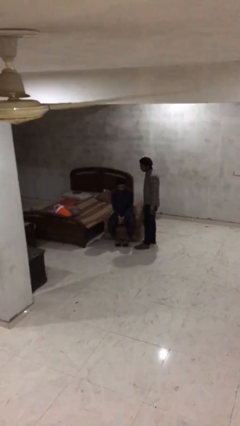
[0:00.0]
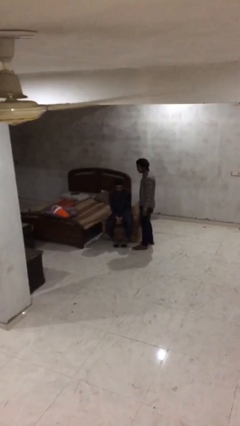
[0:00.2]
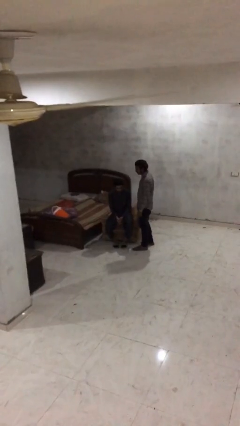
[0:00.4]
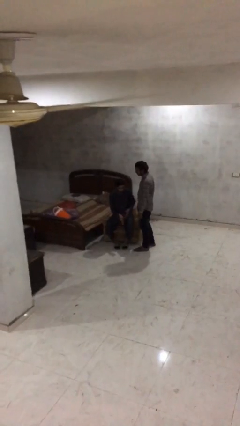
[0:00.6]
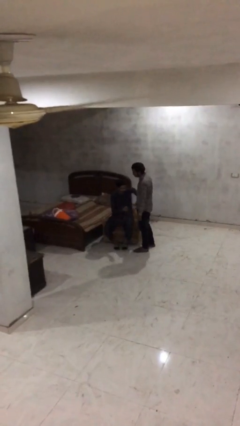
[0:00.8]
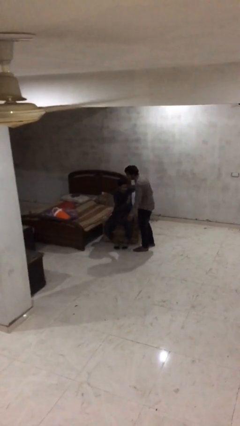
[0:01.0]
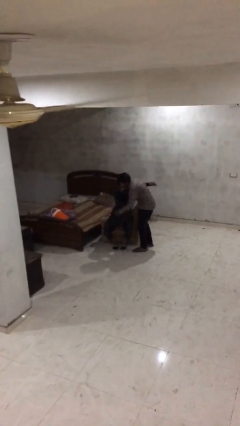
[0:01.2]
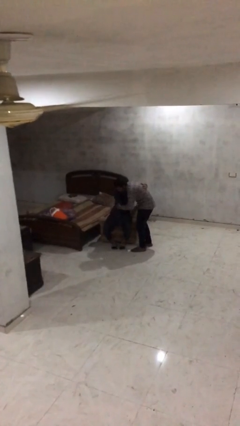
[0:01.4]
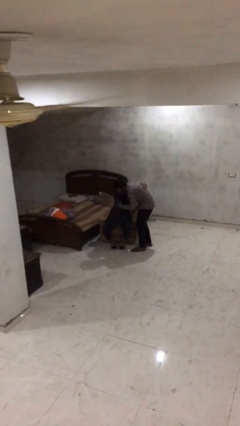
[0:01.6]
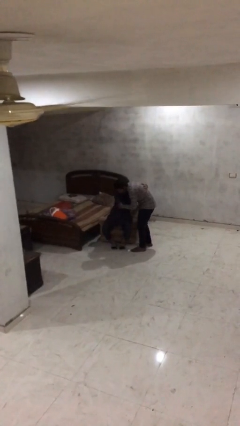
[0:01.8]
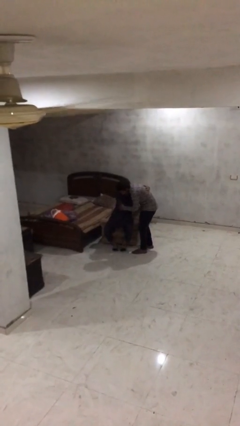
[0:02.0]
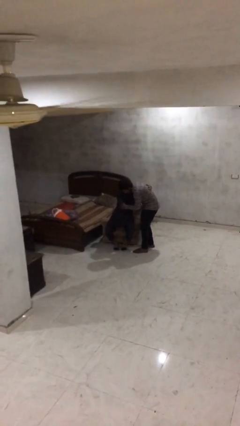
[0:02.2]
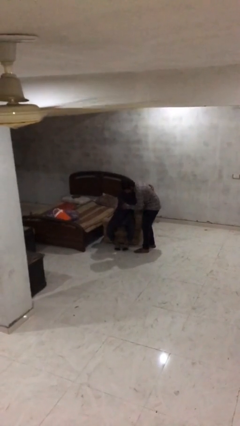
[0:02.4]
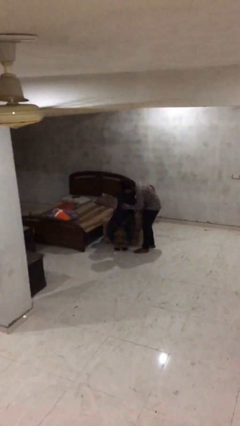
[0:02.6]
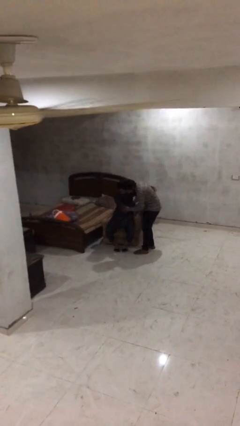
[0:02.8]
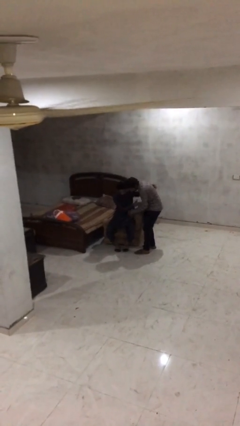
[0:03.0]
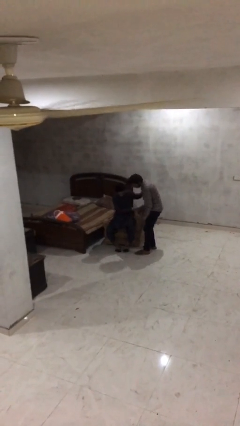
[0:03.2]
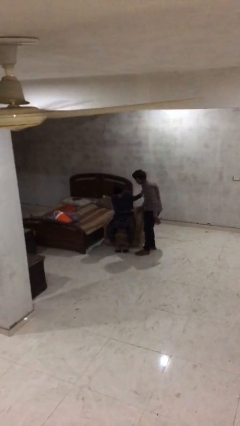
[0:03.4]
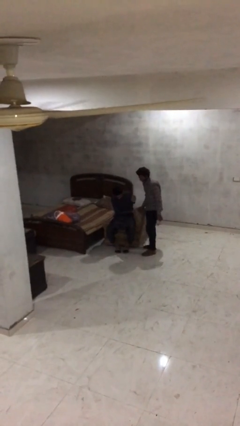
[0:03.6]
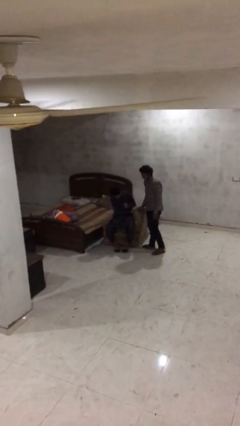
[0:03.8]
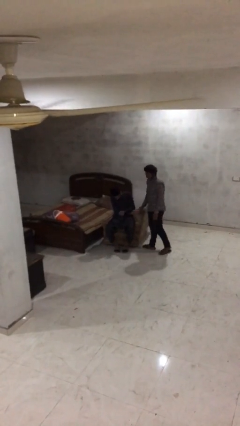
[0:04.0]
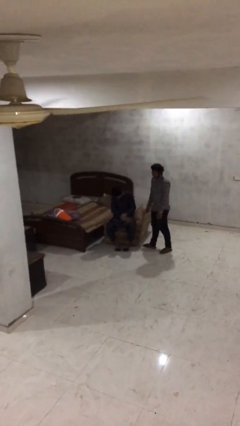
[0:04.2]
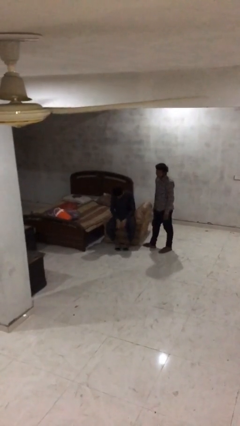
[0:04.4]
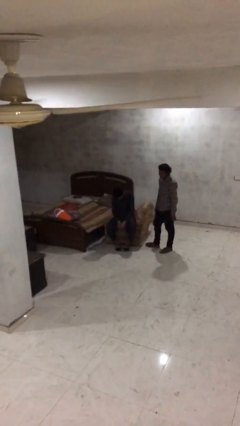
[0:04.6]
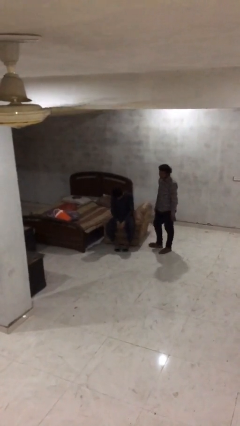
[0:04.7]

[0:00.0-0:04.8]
person embraces person

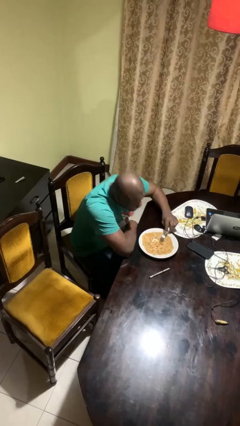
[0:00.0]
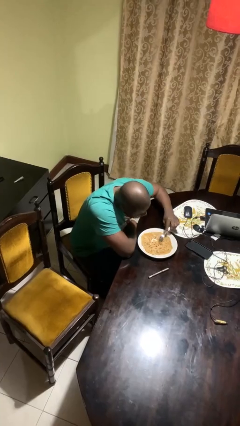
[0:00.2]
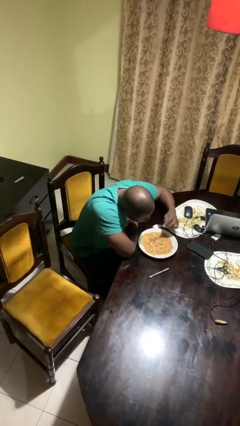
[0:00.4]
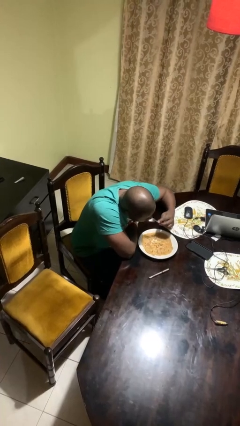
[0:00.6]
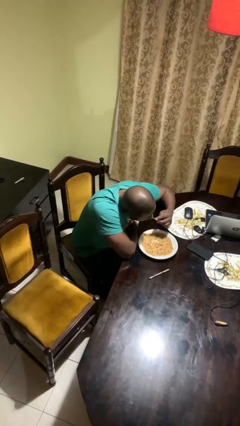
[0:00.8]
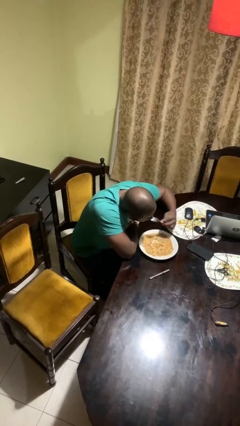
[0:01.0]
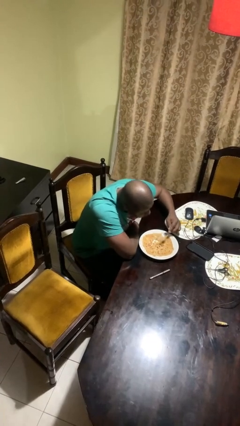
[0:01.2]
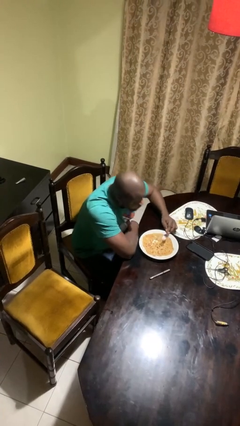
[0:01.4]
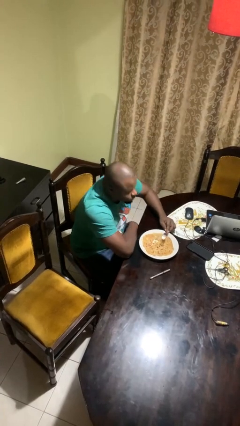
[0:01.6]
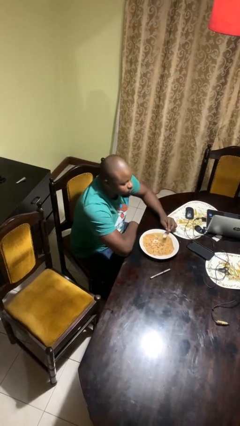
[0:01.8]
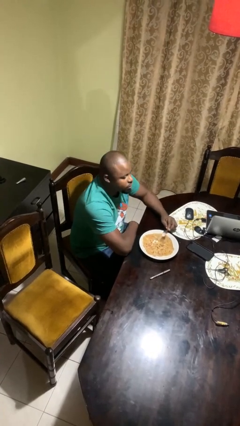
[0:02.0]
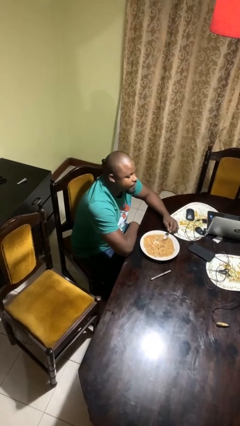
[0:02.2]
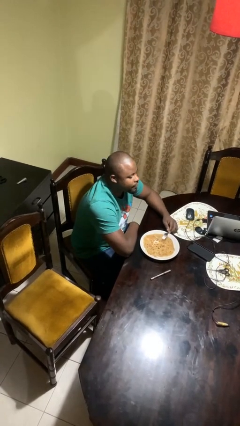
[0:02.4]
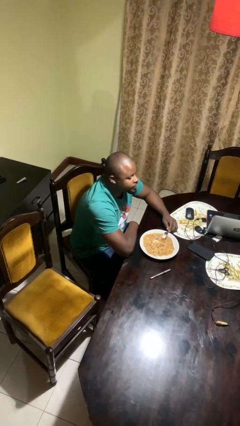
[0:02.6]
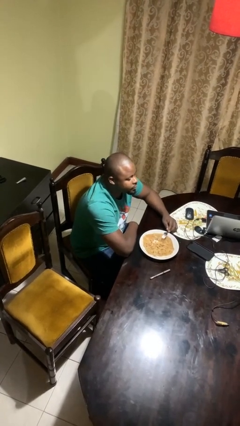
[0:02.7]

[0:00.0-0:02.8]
person eats with utensil

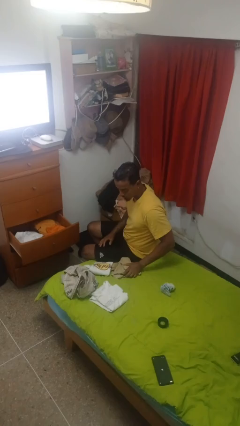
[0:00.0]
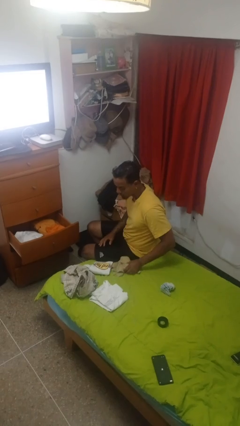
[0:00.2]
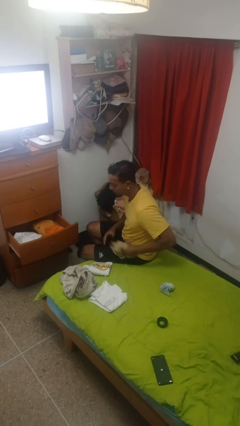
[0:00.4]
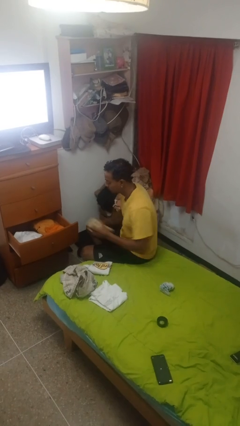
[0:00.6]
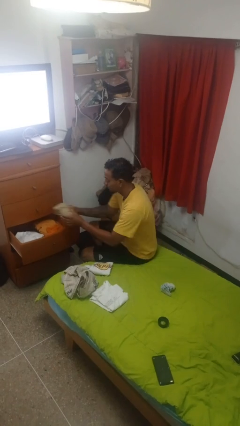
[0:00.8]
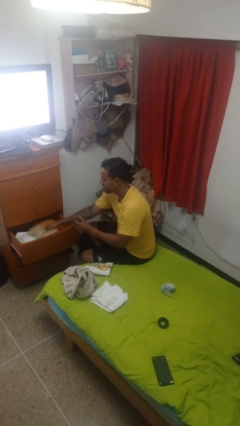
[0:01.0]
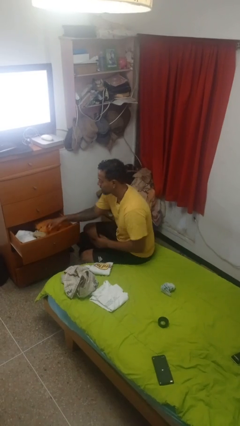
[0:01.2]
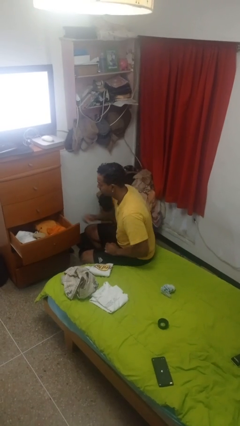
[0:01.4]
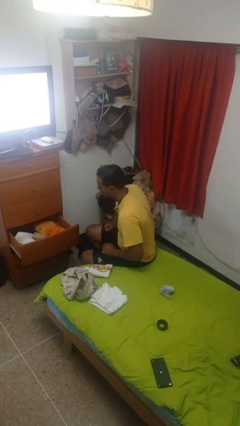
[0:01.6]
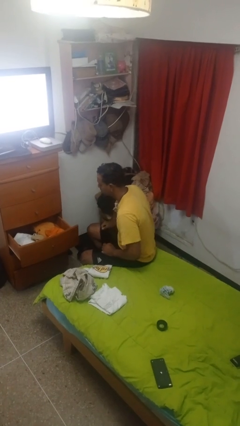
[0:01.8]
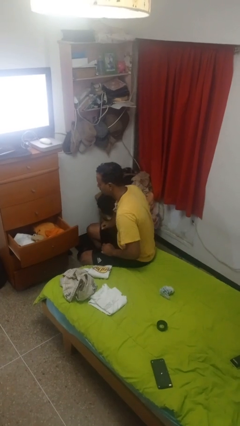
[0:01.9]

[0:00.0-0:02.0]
person puts clothes into dresser

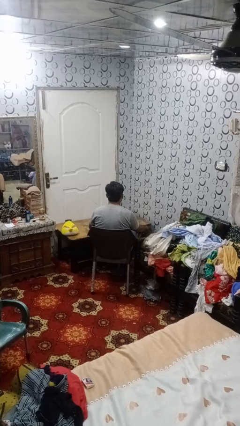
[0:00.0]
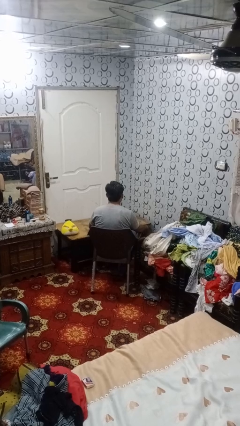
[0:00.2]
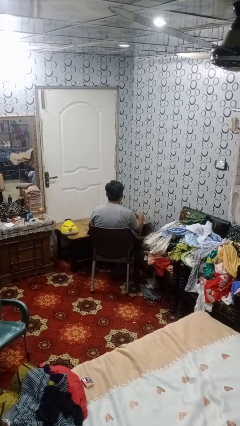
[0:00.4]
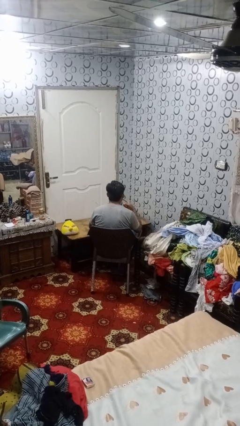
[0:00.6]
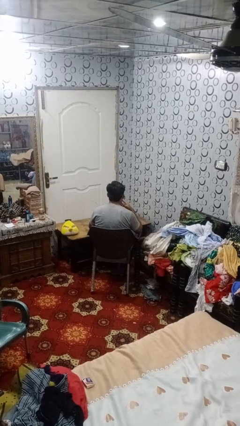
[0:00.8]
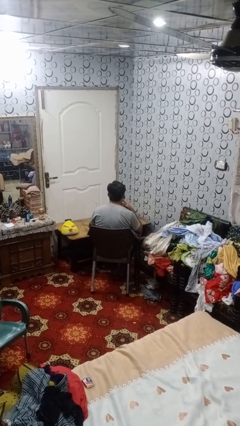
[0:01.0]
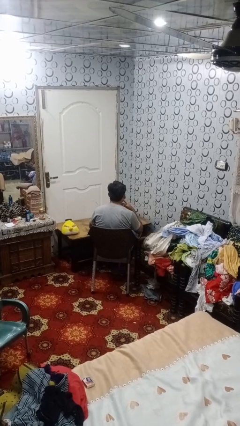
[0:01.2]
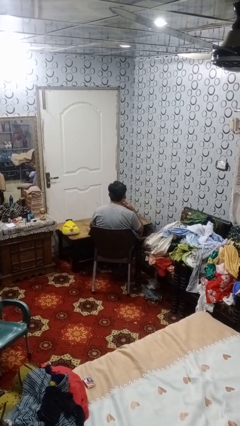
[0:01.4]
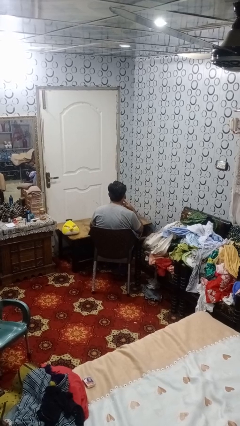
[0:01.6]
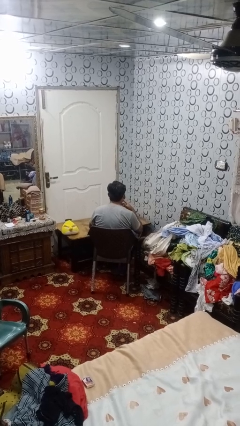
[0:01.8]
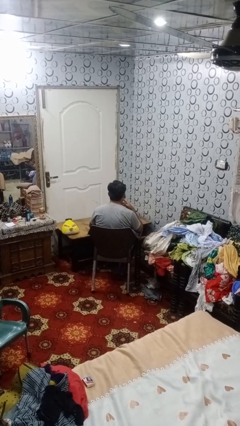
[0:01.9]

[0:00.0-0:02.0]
person licks fingers

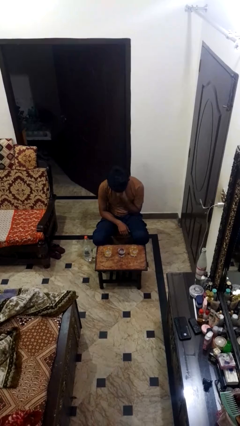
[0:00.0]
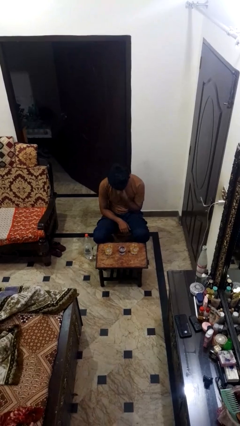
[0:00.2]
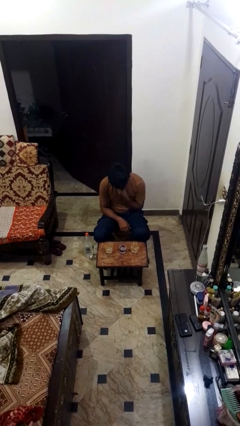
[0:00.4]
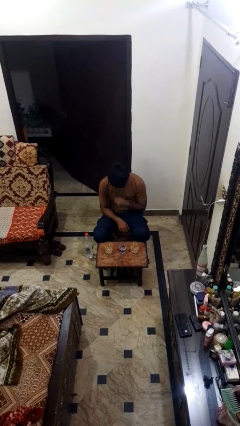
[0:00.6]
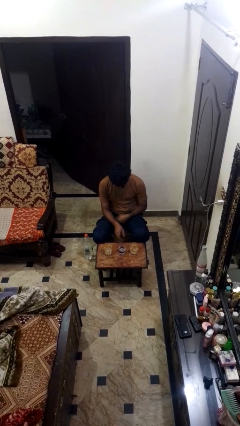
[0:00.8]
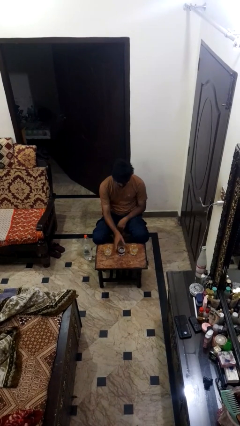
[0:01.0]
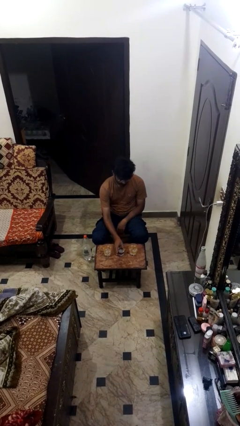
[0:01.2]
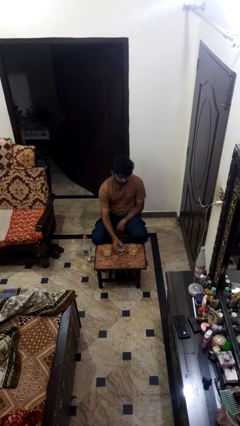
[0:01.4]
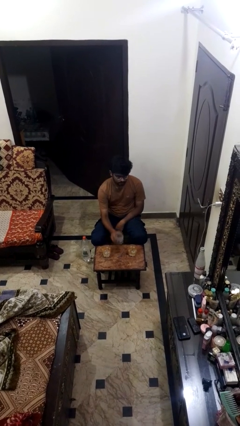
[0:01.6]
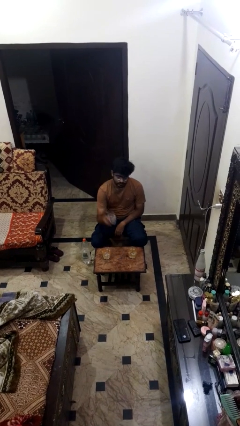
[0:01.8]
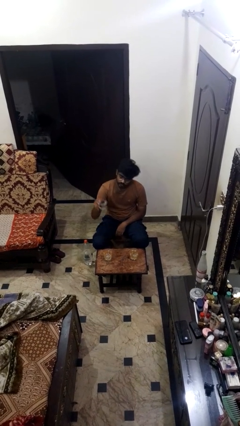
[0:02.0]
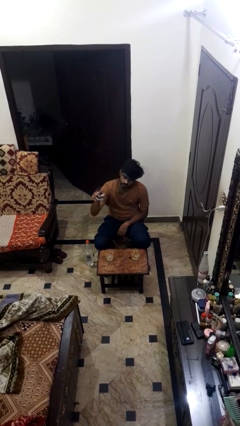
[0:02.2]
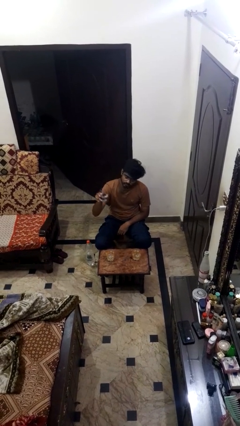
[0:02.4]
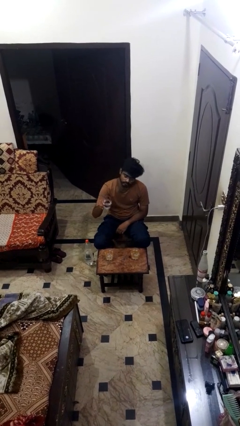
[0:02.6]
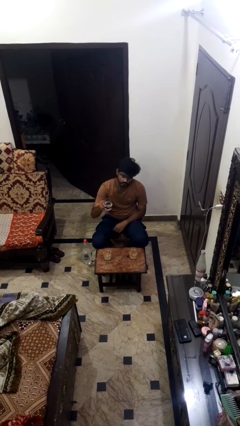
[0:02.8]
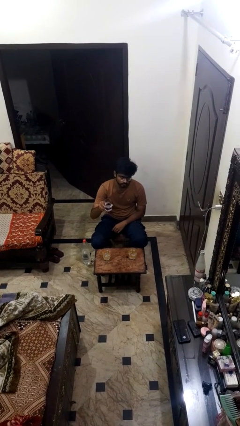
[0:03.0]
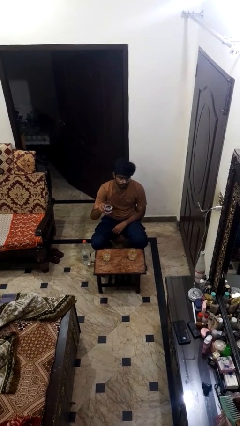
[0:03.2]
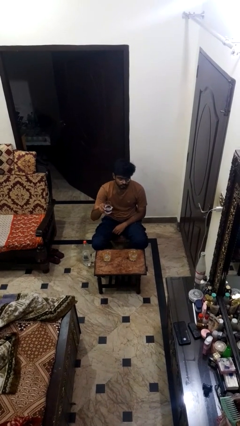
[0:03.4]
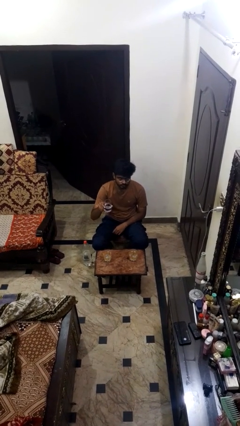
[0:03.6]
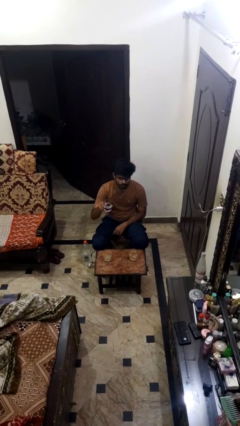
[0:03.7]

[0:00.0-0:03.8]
person picks up object from table

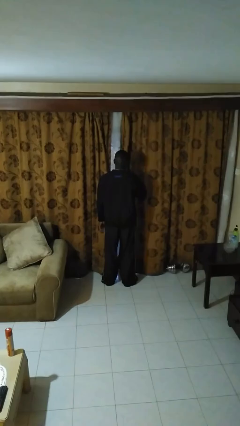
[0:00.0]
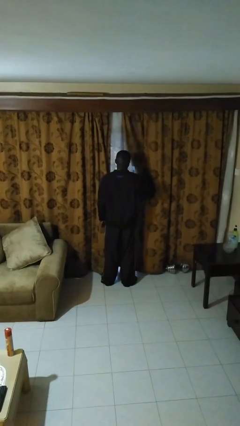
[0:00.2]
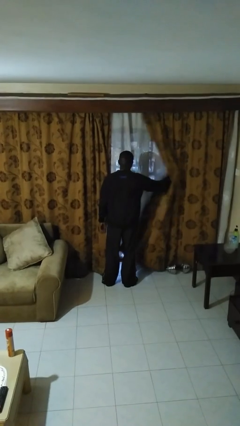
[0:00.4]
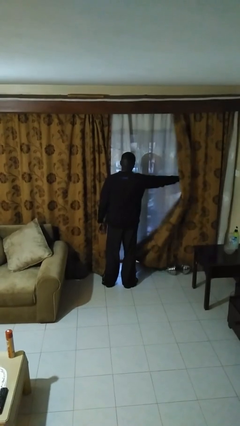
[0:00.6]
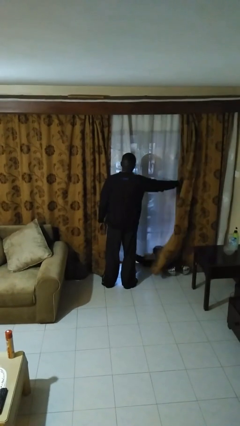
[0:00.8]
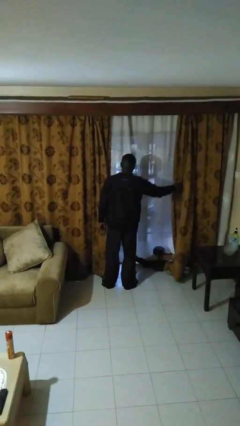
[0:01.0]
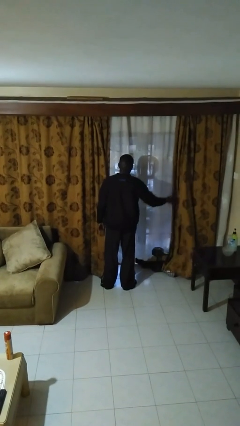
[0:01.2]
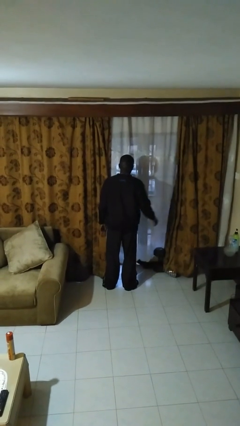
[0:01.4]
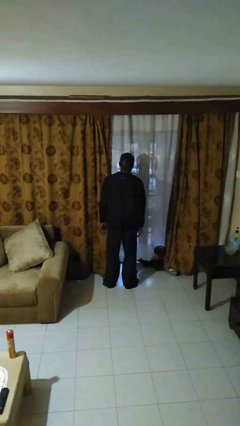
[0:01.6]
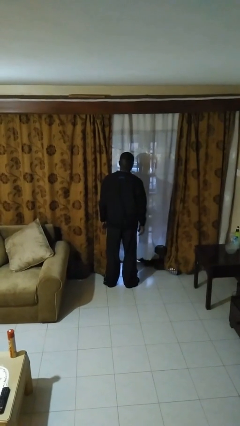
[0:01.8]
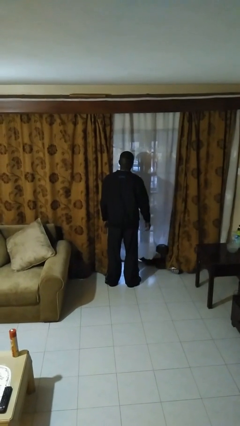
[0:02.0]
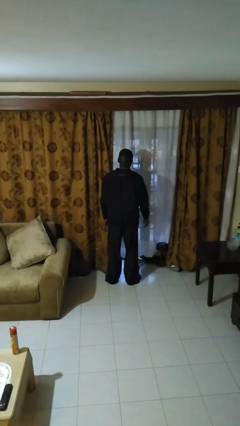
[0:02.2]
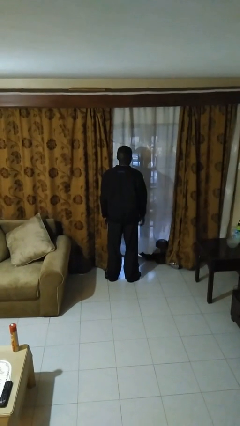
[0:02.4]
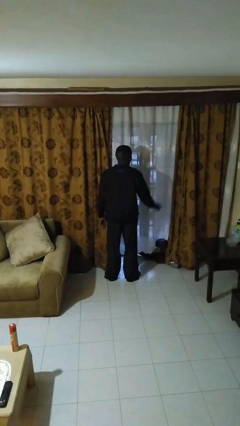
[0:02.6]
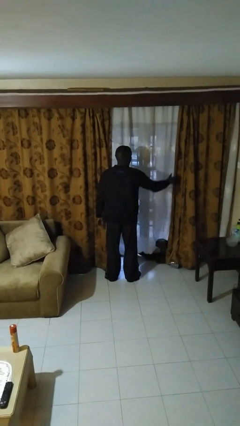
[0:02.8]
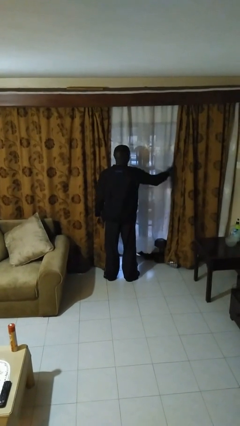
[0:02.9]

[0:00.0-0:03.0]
person opens curtains
